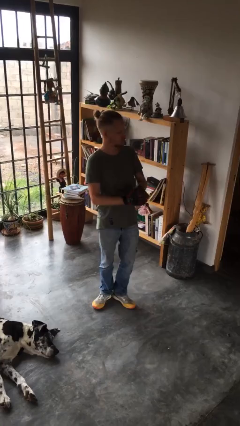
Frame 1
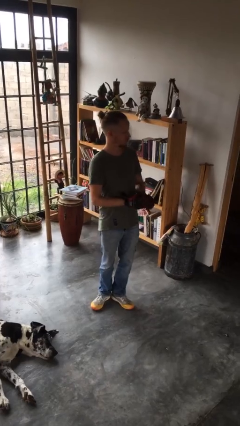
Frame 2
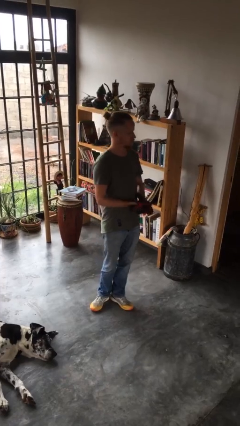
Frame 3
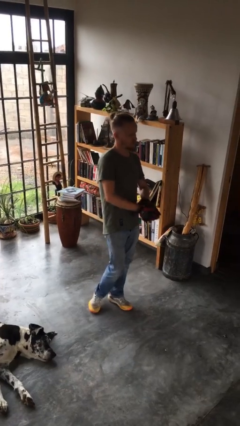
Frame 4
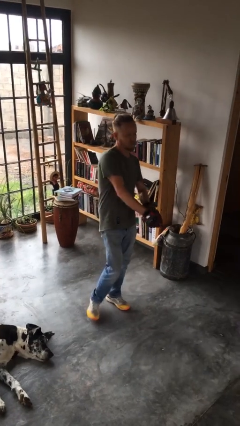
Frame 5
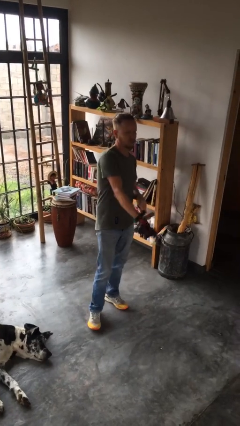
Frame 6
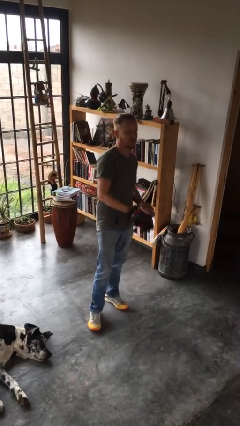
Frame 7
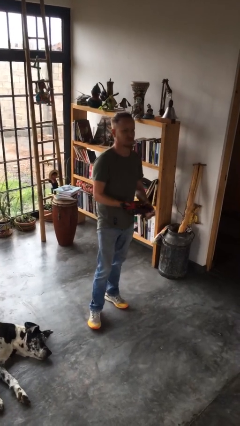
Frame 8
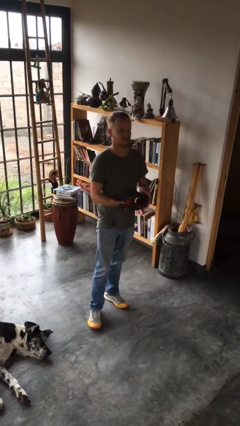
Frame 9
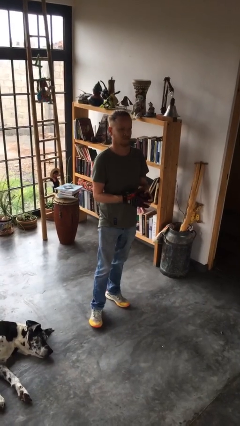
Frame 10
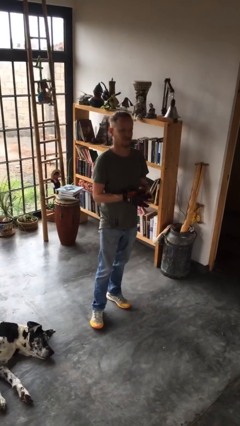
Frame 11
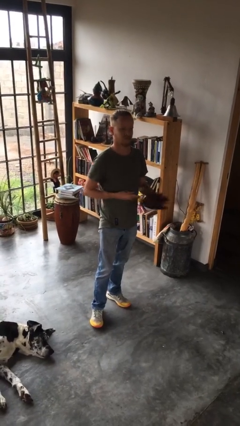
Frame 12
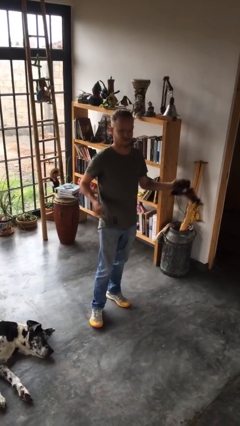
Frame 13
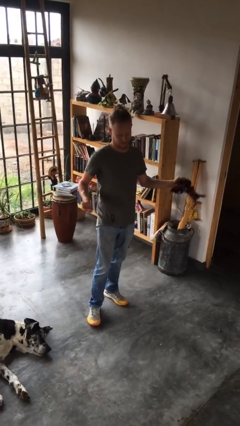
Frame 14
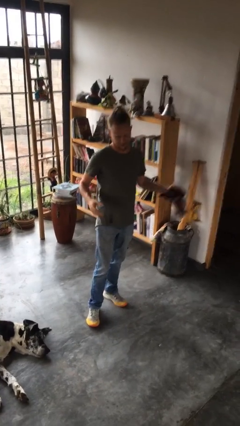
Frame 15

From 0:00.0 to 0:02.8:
person takes off gloves

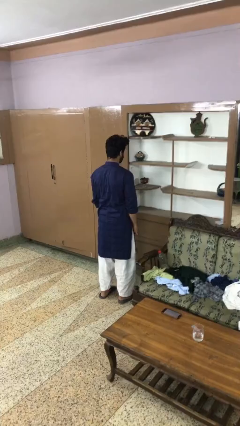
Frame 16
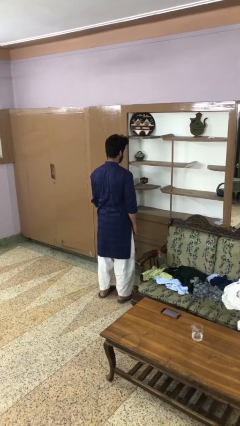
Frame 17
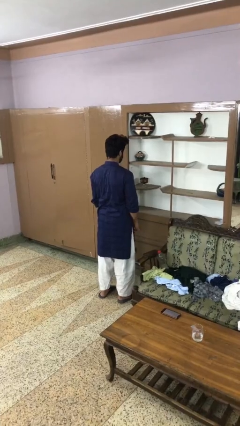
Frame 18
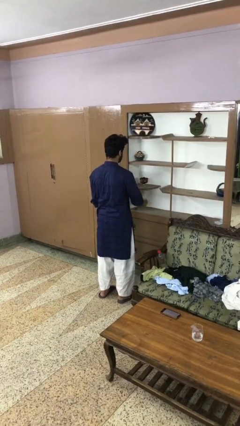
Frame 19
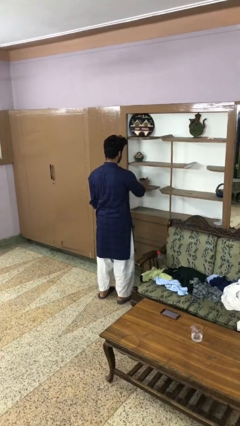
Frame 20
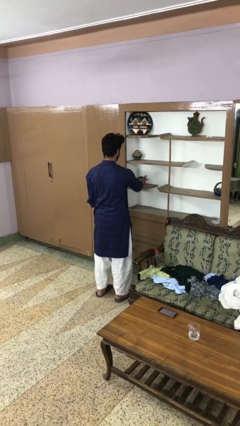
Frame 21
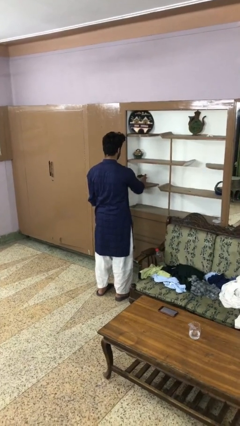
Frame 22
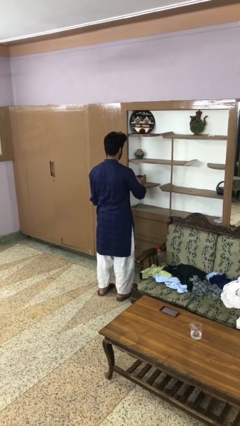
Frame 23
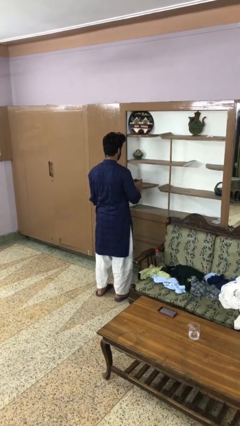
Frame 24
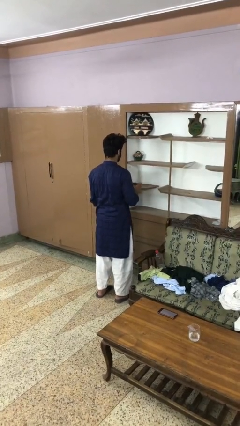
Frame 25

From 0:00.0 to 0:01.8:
person picks up object from shelf

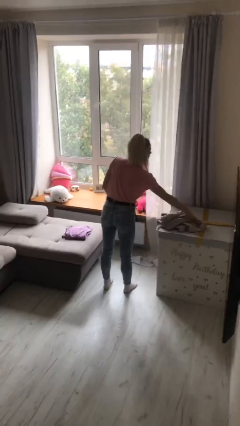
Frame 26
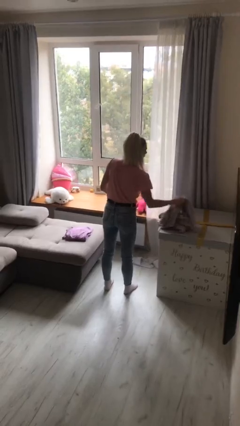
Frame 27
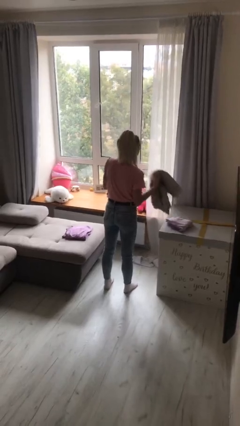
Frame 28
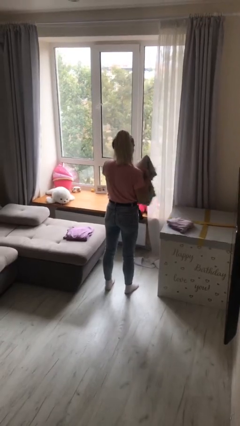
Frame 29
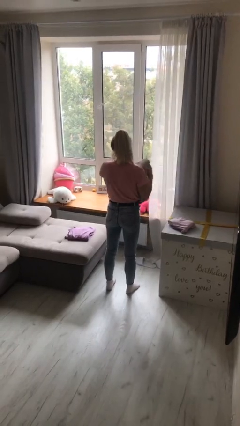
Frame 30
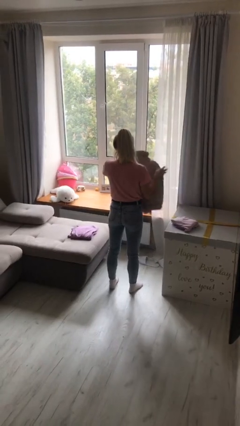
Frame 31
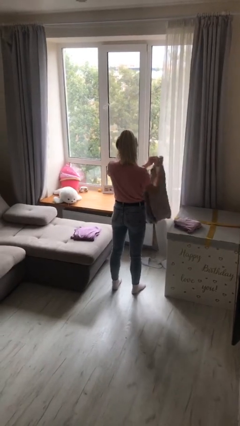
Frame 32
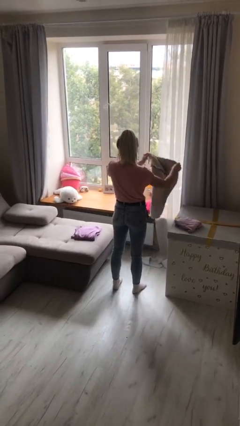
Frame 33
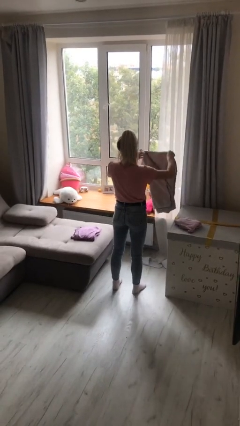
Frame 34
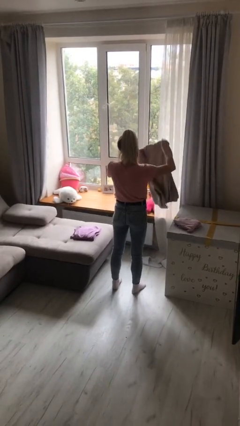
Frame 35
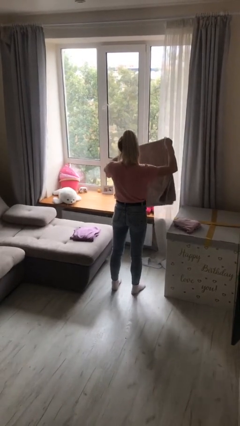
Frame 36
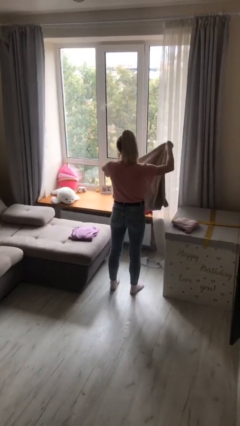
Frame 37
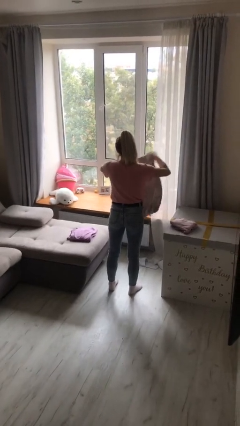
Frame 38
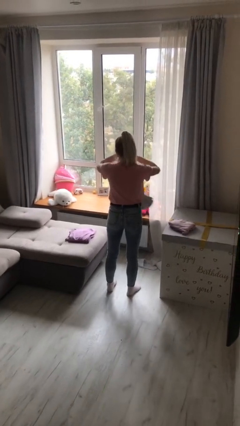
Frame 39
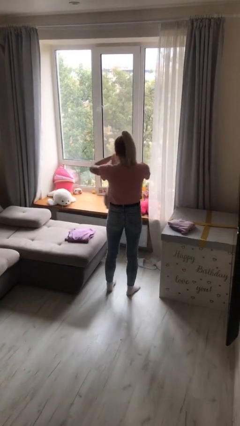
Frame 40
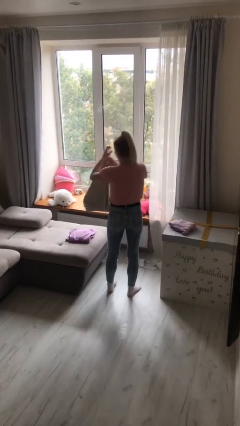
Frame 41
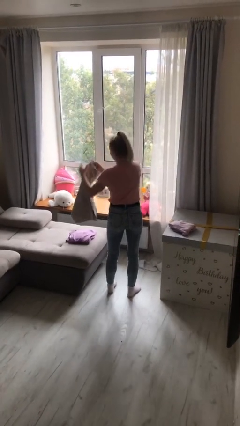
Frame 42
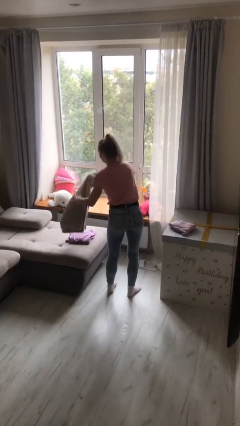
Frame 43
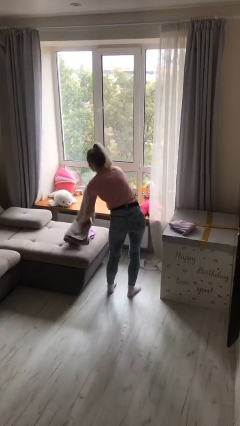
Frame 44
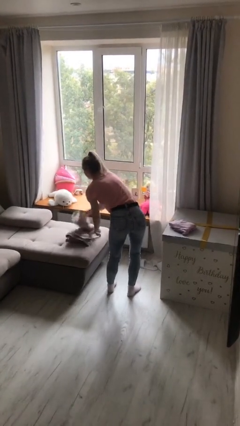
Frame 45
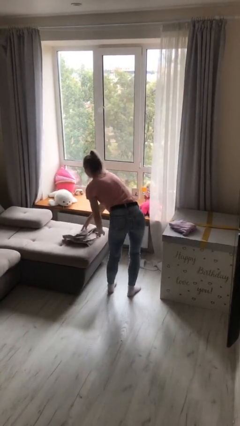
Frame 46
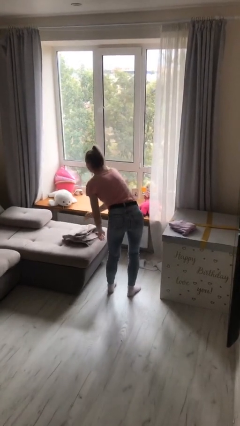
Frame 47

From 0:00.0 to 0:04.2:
person folds towel

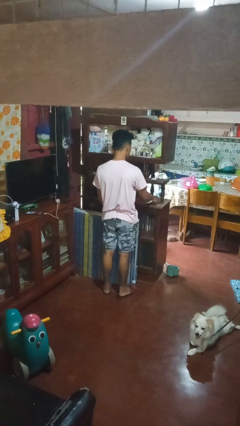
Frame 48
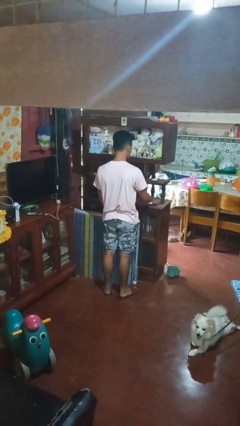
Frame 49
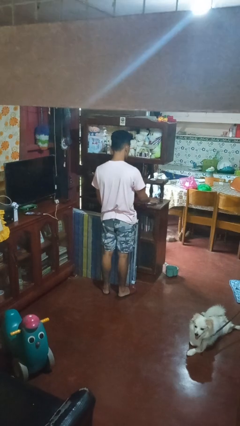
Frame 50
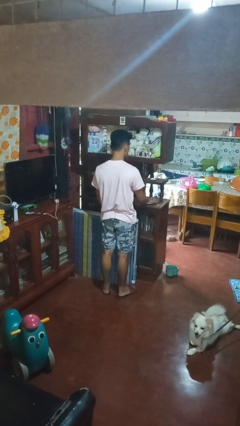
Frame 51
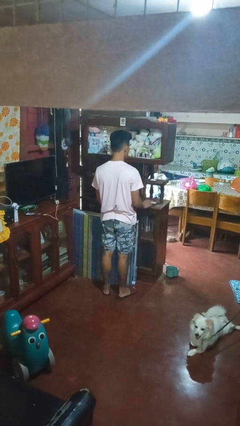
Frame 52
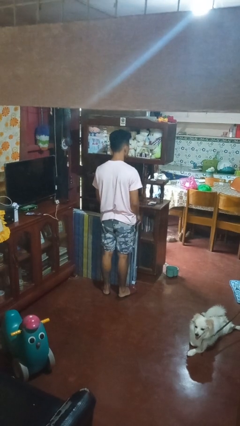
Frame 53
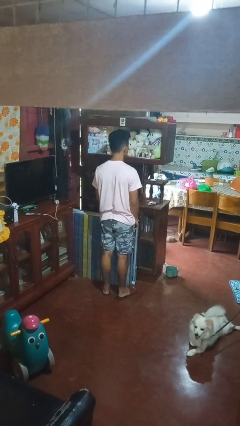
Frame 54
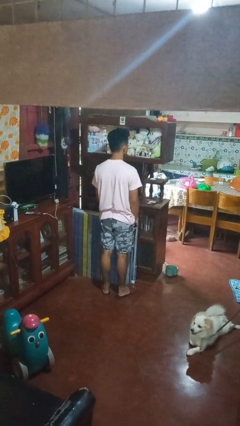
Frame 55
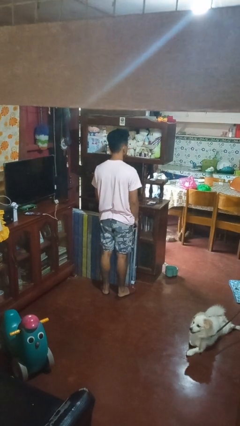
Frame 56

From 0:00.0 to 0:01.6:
person puts down object on shelf

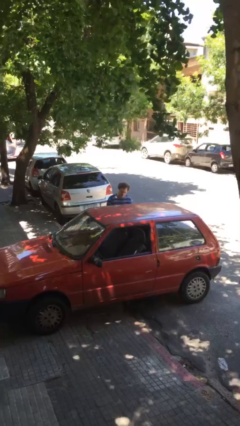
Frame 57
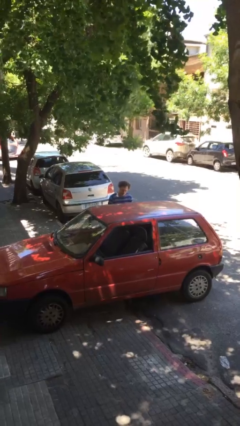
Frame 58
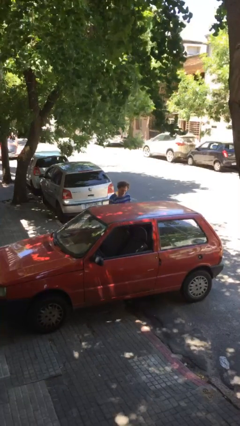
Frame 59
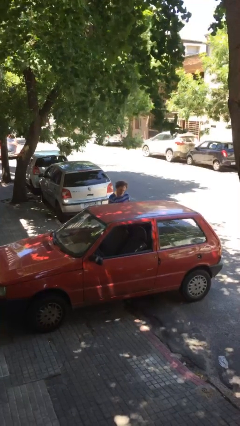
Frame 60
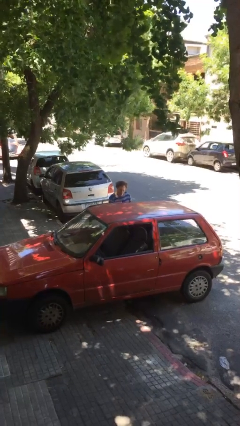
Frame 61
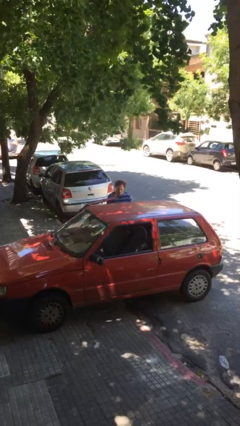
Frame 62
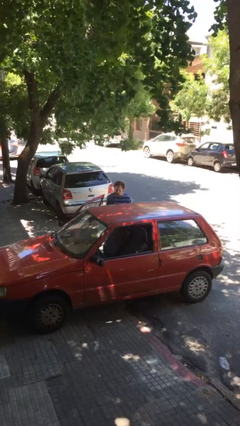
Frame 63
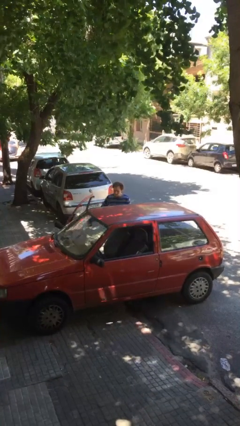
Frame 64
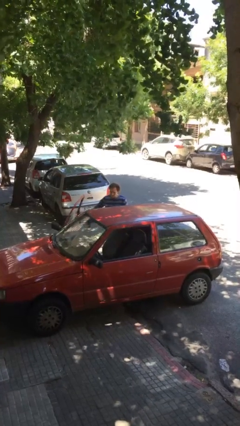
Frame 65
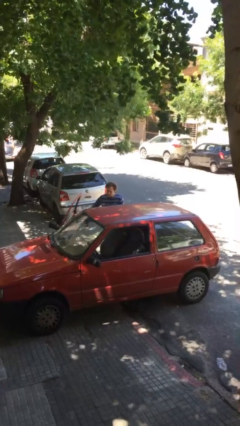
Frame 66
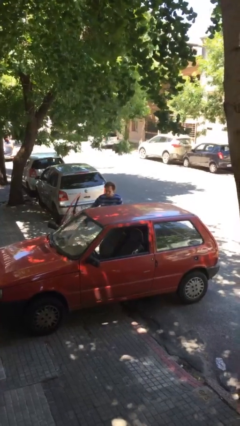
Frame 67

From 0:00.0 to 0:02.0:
person opens car door

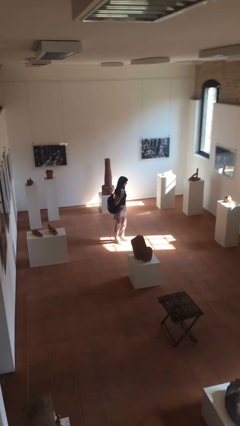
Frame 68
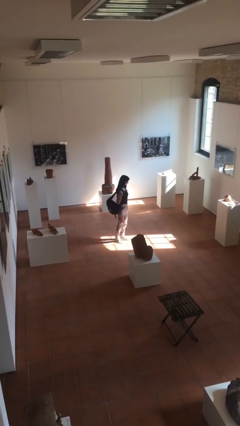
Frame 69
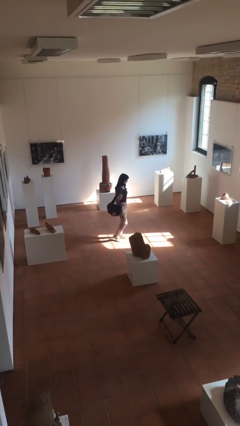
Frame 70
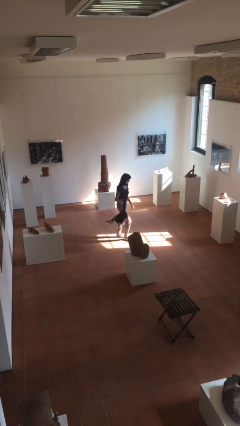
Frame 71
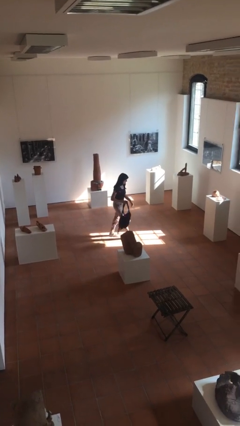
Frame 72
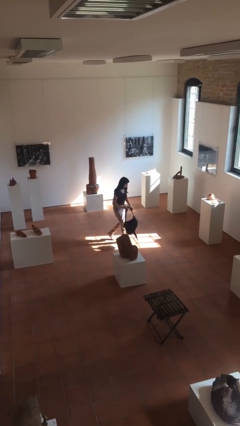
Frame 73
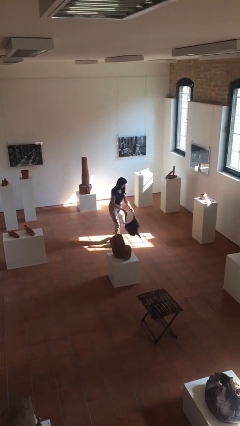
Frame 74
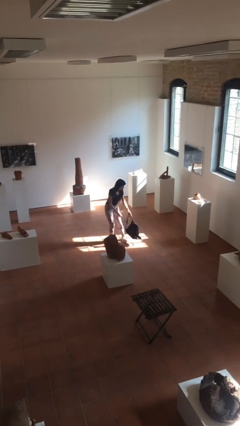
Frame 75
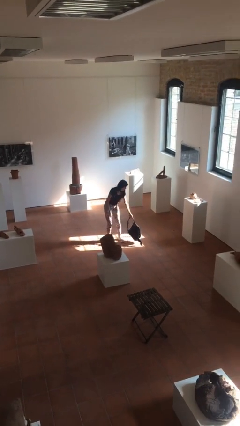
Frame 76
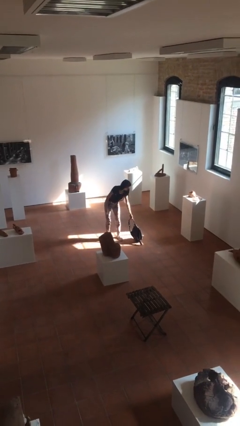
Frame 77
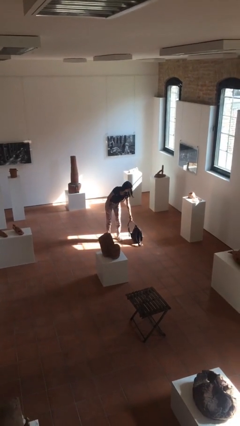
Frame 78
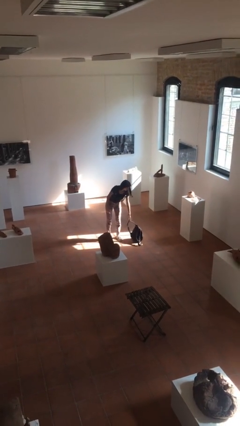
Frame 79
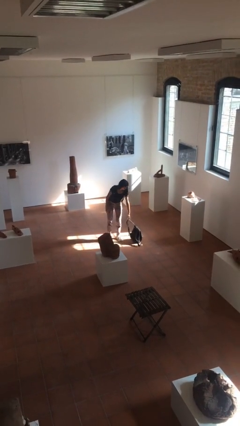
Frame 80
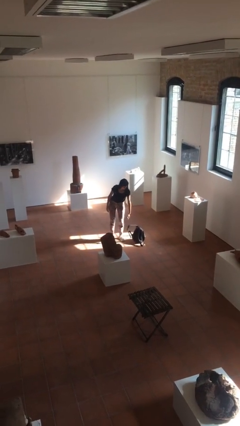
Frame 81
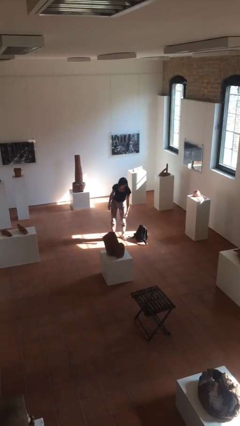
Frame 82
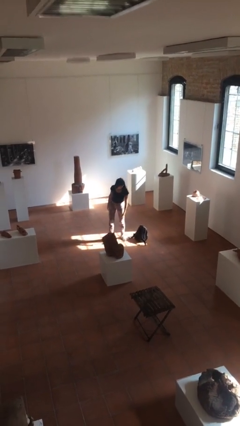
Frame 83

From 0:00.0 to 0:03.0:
person puts down object on floor

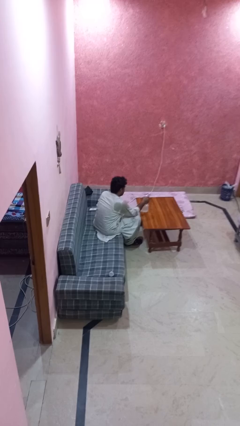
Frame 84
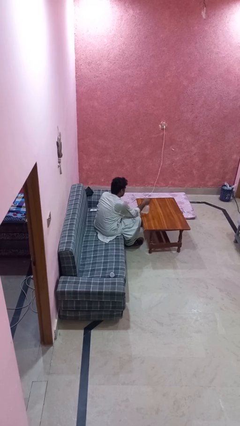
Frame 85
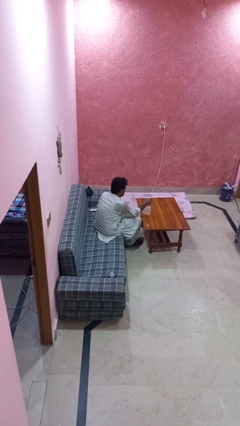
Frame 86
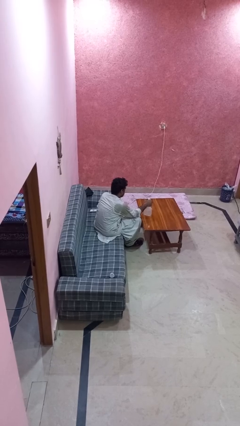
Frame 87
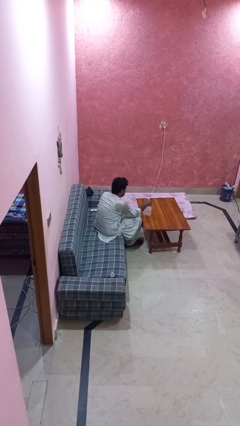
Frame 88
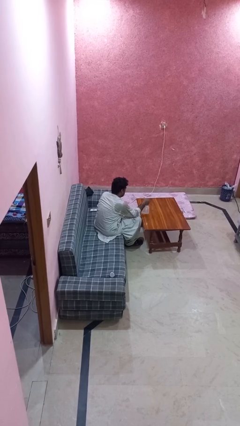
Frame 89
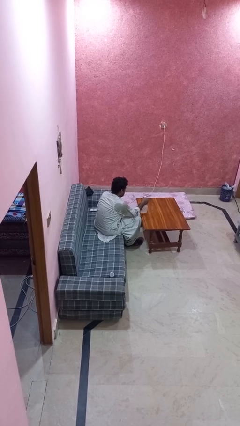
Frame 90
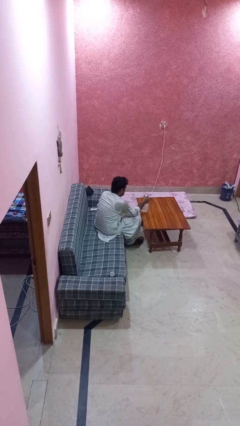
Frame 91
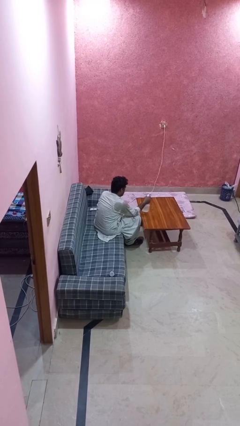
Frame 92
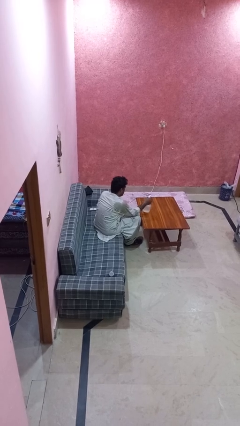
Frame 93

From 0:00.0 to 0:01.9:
person sprays from bottle
